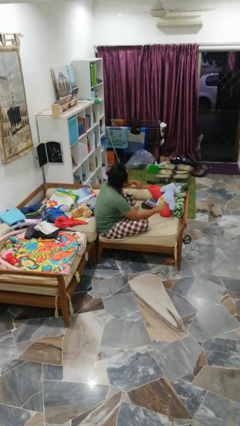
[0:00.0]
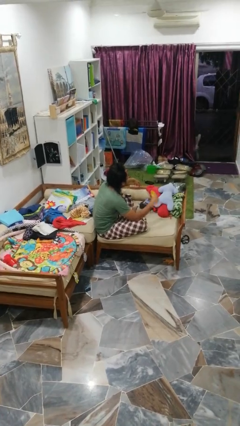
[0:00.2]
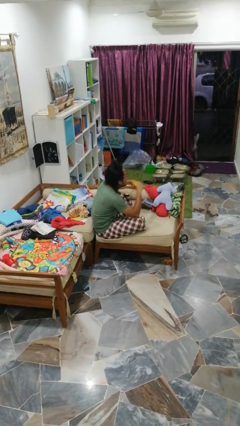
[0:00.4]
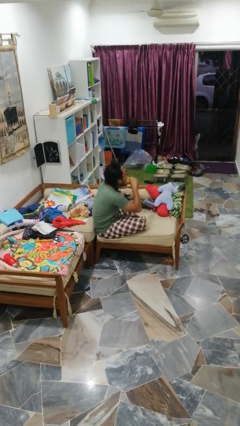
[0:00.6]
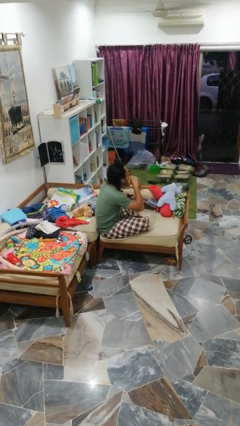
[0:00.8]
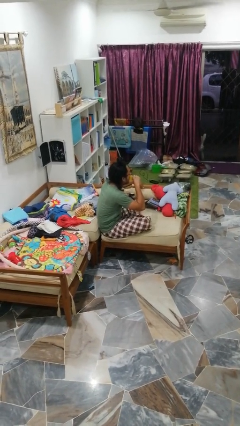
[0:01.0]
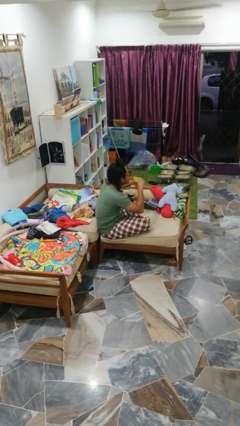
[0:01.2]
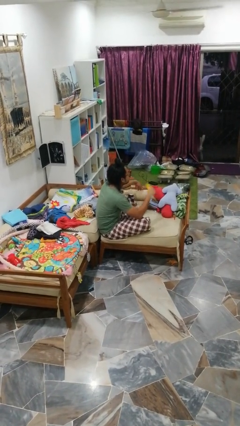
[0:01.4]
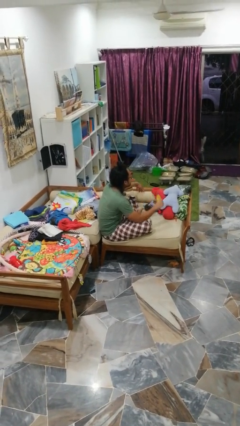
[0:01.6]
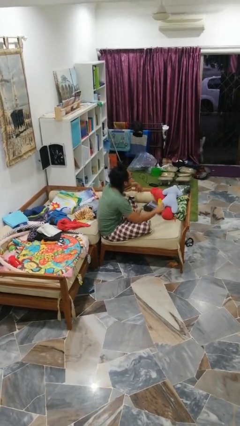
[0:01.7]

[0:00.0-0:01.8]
person eats banana

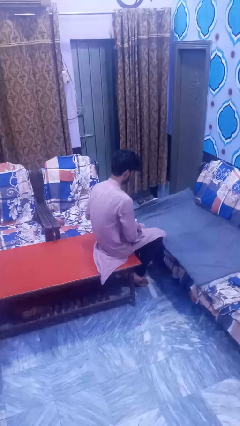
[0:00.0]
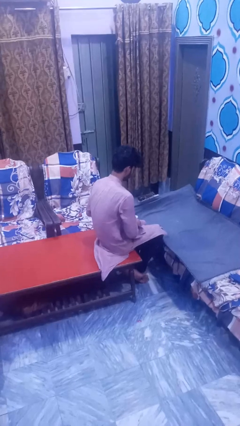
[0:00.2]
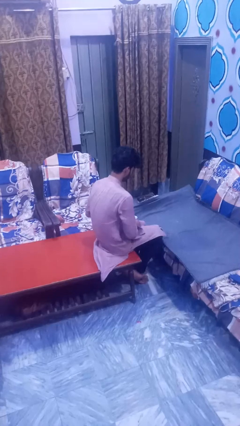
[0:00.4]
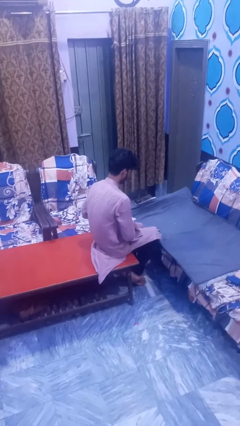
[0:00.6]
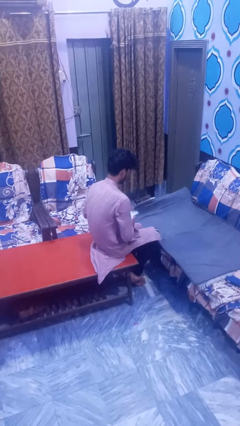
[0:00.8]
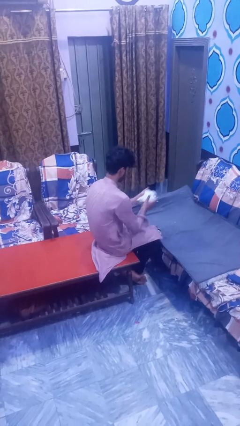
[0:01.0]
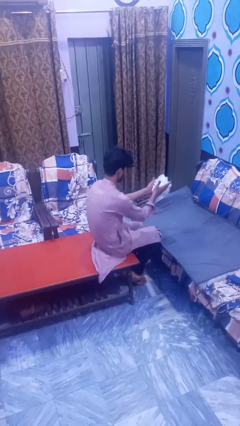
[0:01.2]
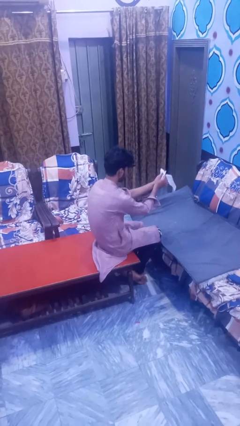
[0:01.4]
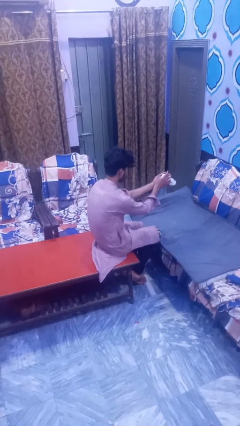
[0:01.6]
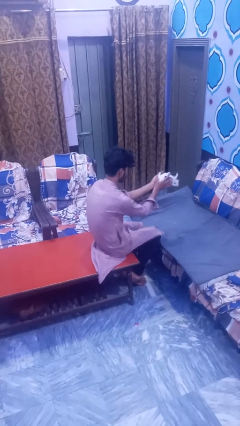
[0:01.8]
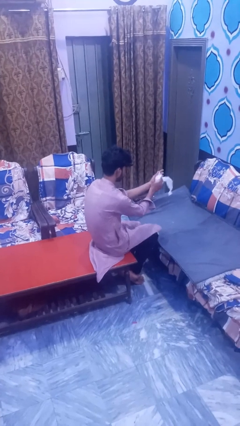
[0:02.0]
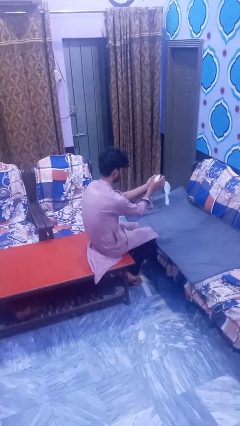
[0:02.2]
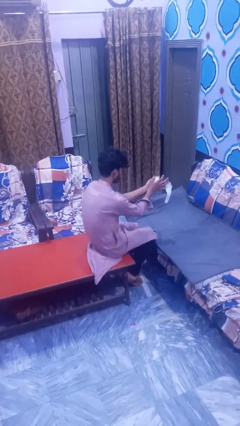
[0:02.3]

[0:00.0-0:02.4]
person crumples paper

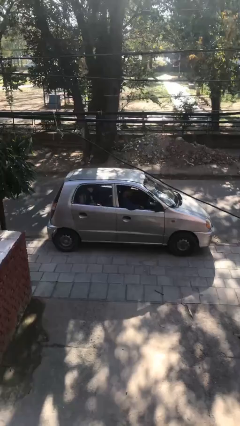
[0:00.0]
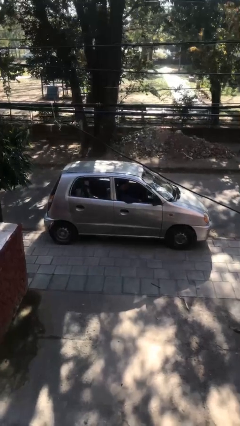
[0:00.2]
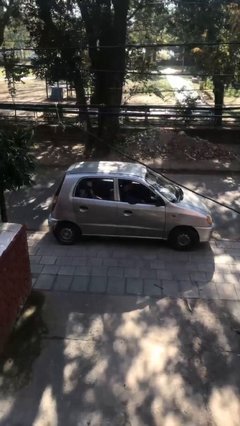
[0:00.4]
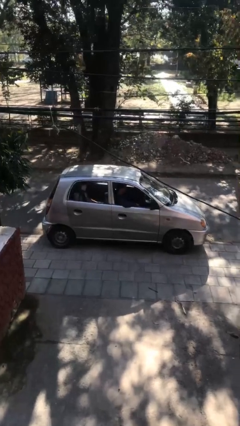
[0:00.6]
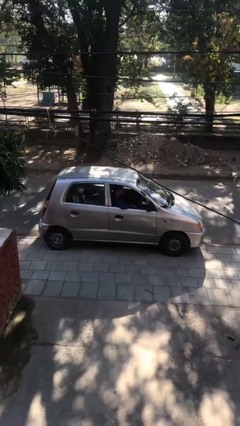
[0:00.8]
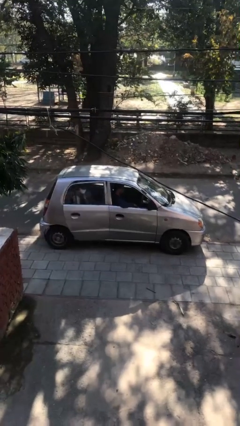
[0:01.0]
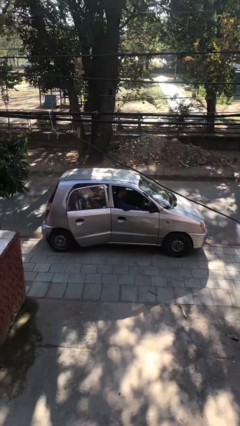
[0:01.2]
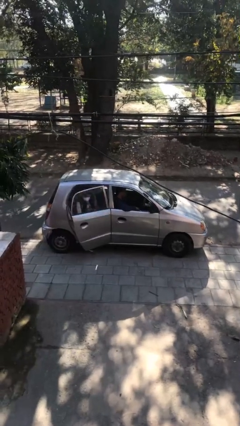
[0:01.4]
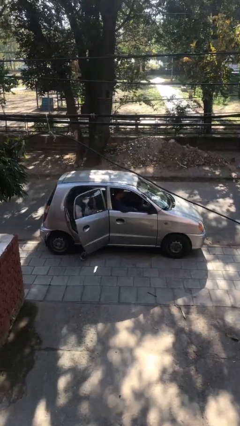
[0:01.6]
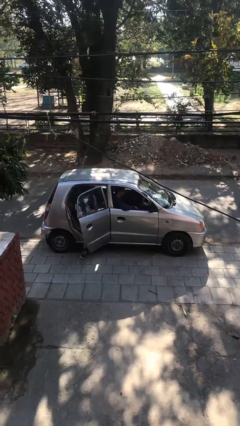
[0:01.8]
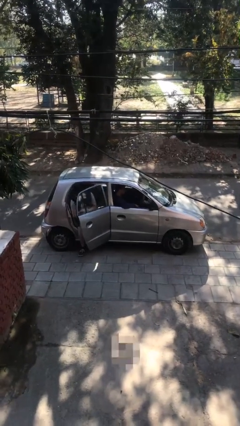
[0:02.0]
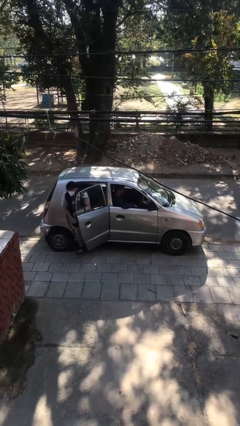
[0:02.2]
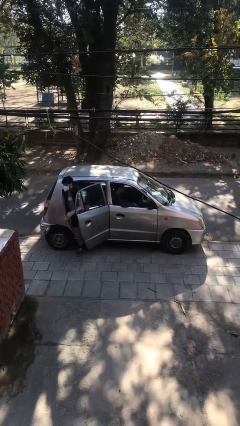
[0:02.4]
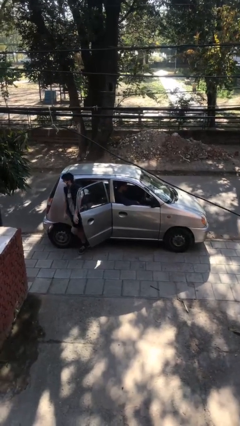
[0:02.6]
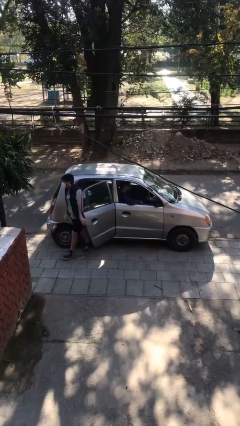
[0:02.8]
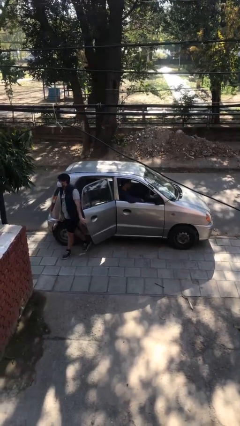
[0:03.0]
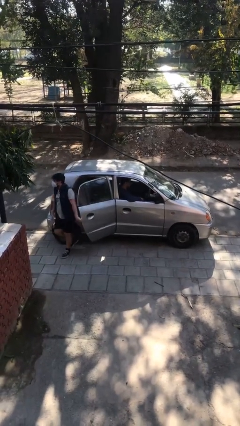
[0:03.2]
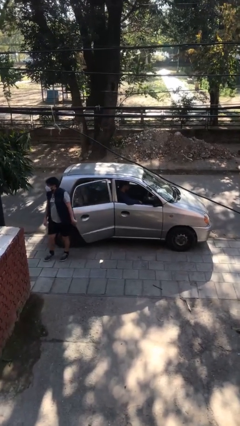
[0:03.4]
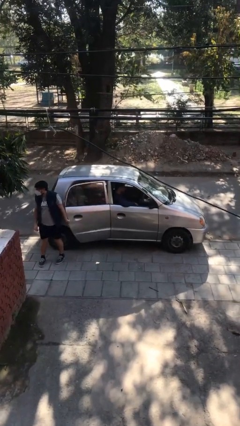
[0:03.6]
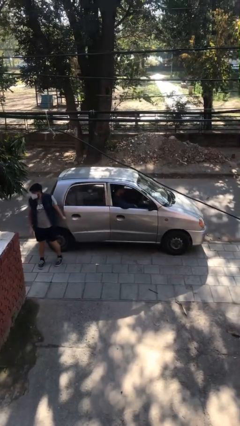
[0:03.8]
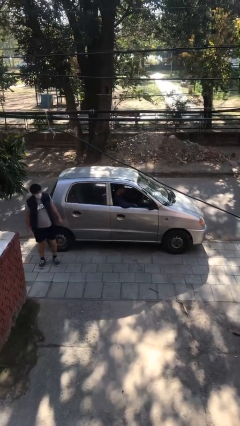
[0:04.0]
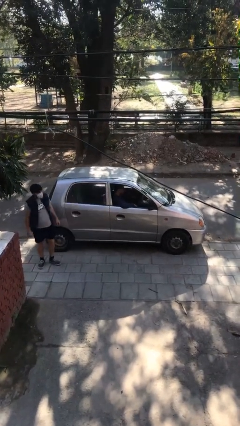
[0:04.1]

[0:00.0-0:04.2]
car drops off person

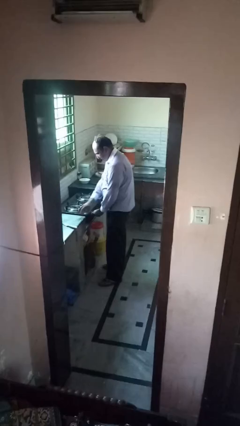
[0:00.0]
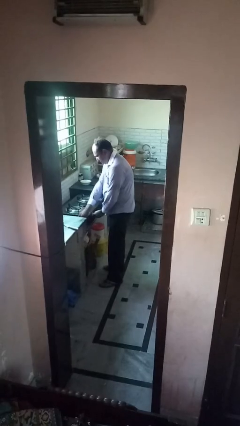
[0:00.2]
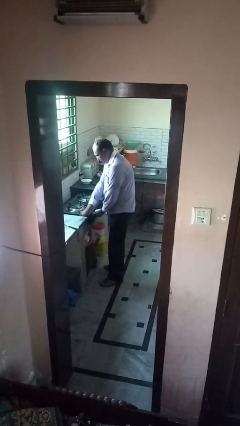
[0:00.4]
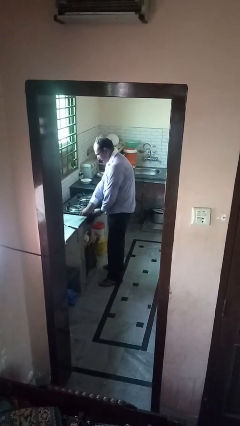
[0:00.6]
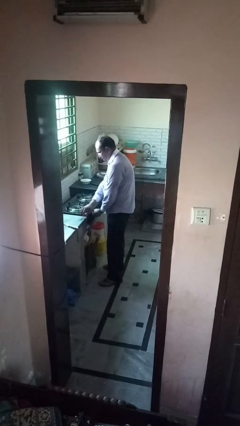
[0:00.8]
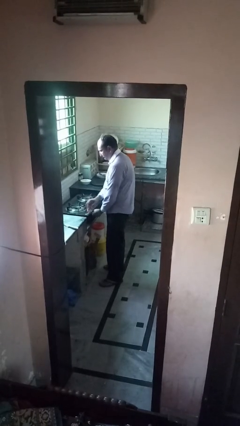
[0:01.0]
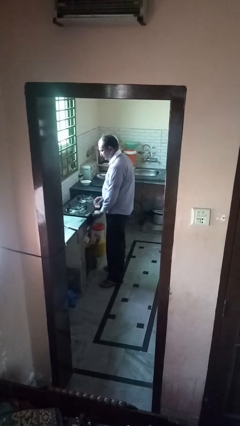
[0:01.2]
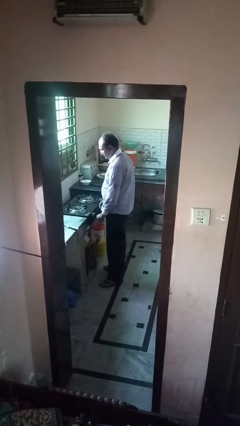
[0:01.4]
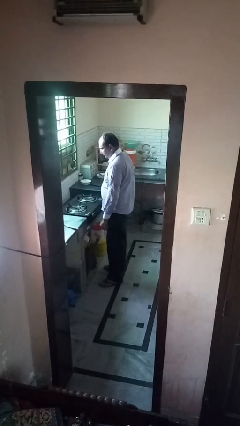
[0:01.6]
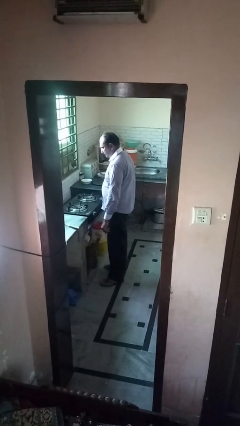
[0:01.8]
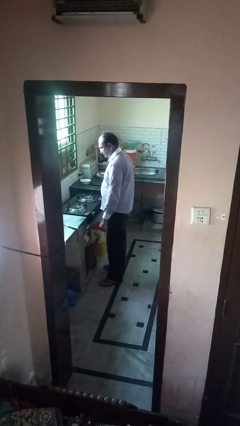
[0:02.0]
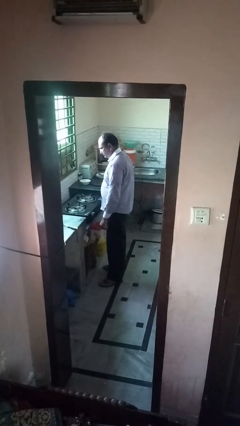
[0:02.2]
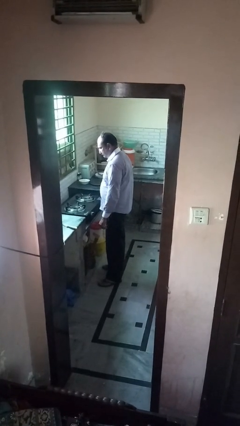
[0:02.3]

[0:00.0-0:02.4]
person turns off stovetop

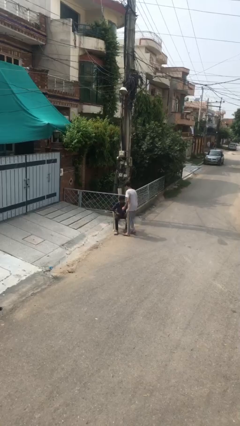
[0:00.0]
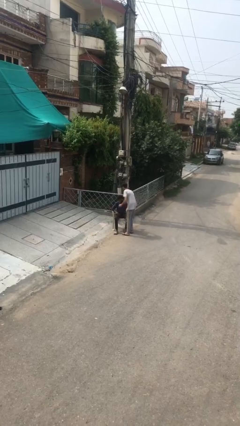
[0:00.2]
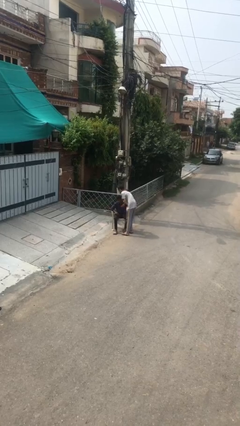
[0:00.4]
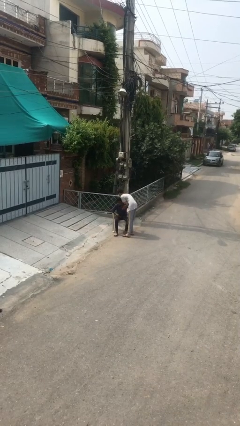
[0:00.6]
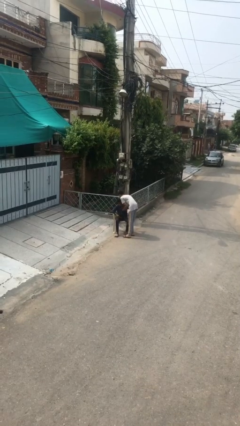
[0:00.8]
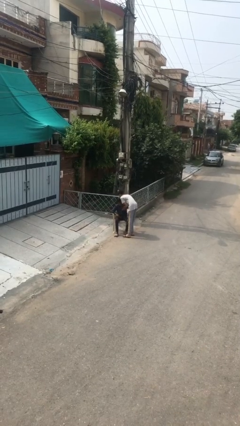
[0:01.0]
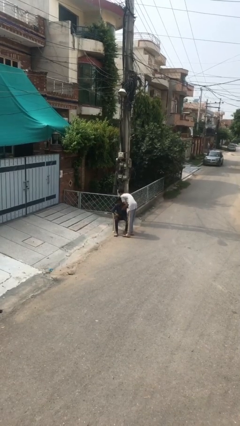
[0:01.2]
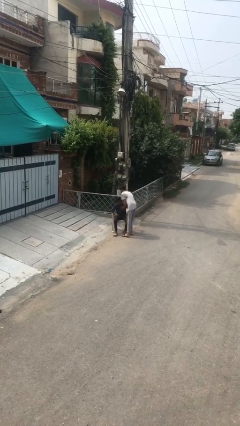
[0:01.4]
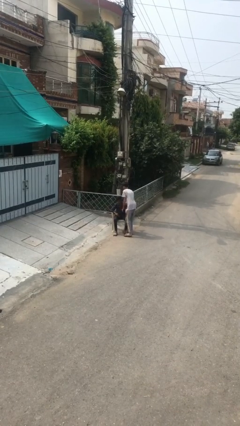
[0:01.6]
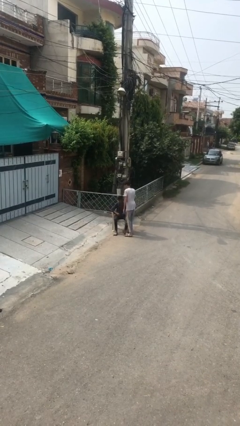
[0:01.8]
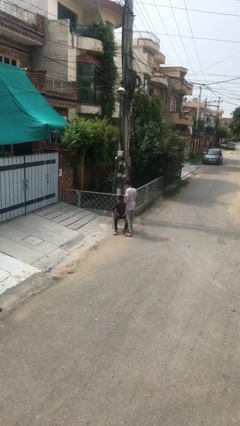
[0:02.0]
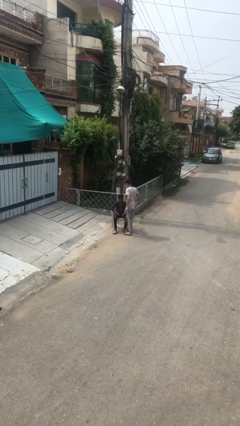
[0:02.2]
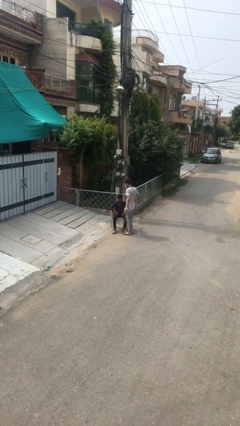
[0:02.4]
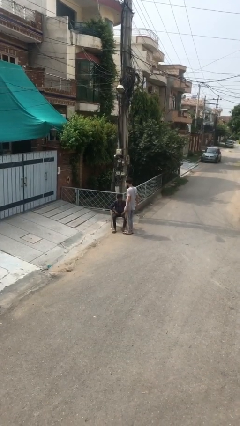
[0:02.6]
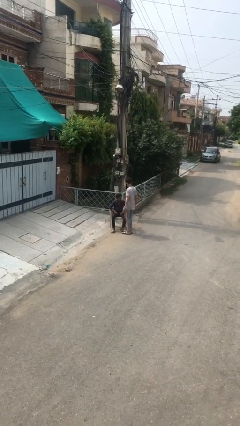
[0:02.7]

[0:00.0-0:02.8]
person embraces person

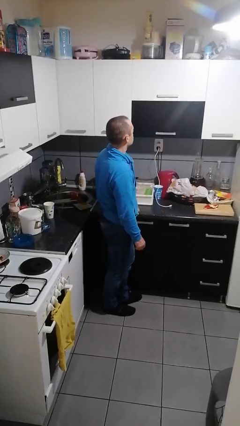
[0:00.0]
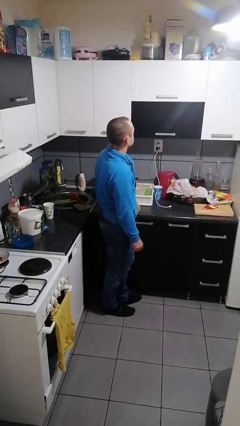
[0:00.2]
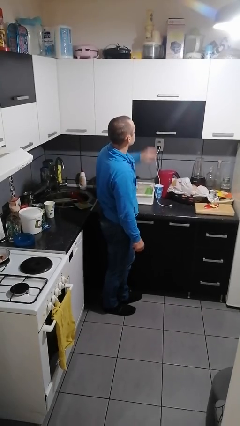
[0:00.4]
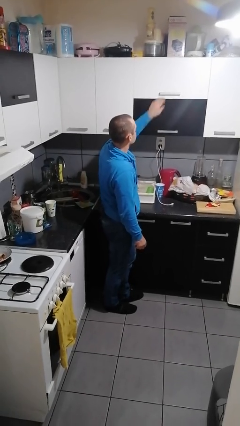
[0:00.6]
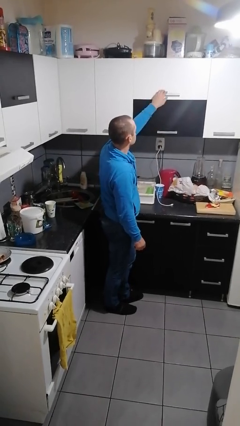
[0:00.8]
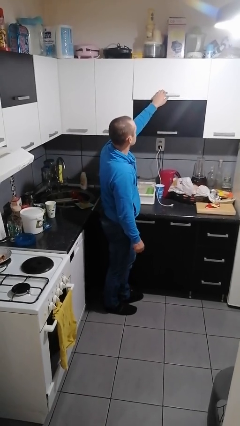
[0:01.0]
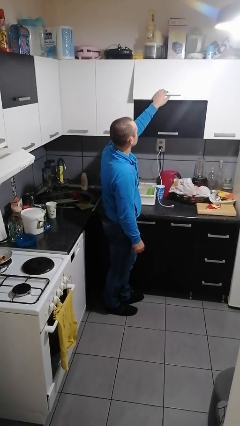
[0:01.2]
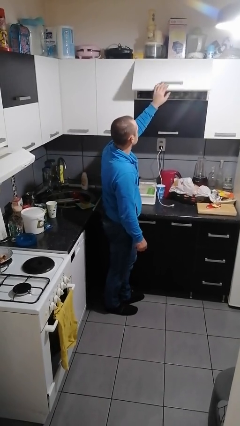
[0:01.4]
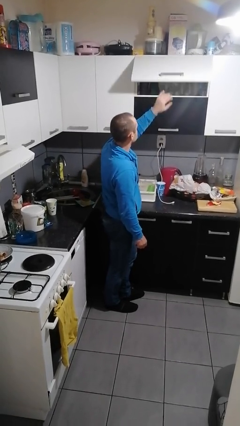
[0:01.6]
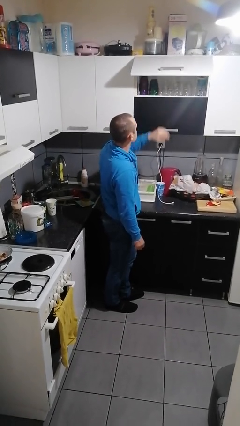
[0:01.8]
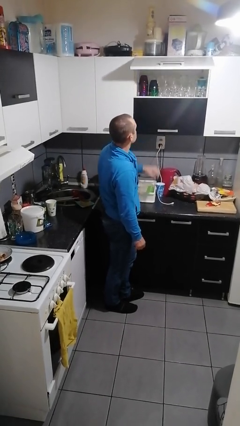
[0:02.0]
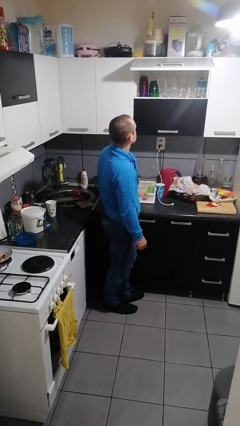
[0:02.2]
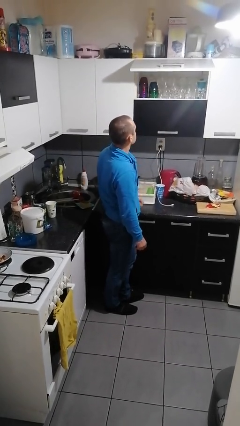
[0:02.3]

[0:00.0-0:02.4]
person opens cabinet

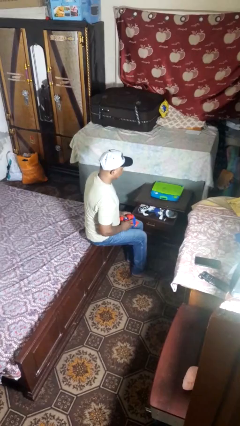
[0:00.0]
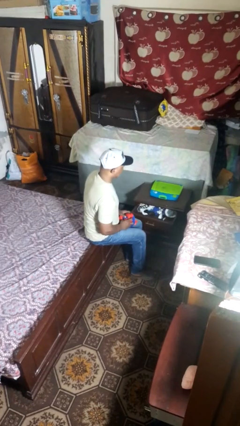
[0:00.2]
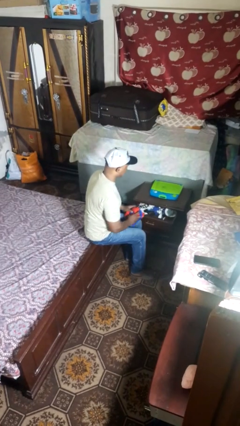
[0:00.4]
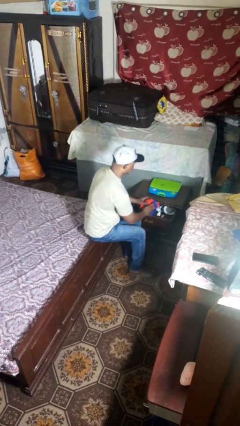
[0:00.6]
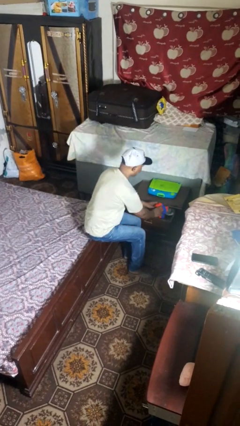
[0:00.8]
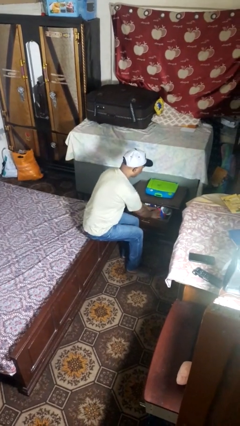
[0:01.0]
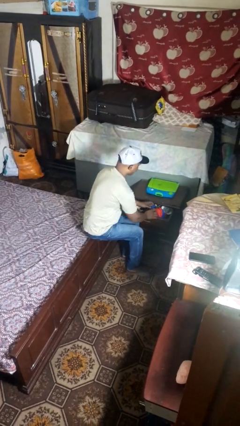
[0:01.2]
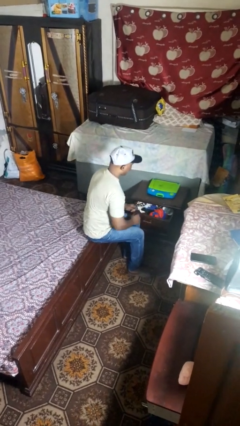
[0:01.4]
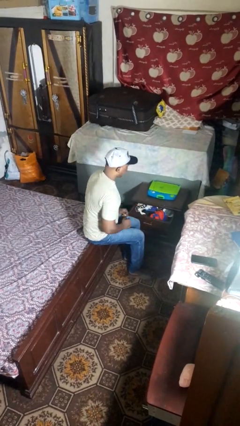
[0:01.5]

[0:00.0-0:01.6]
person puts clothes into dresser
